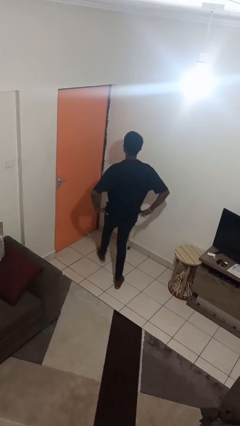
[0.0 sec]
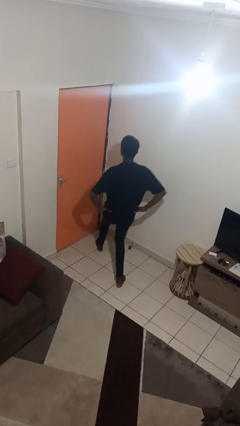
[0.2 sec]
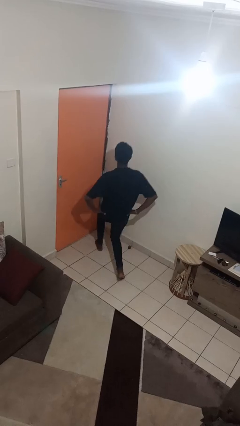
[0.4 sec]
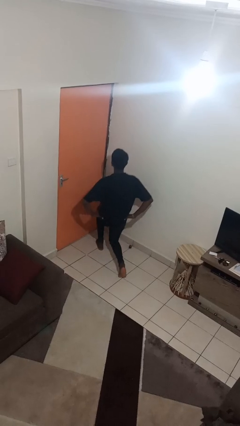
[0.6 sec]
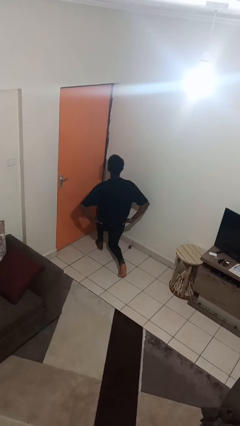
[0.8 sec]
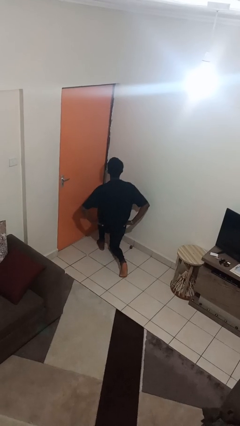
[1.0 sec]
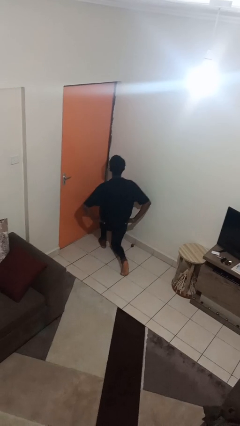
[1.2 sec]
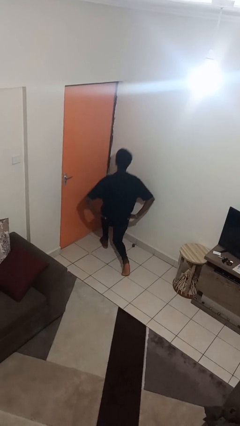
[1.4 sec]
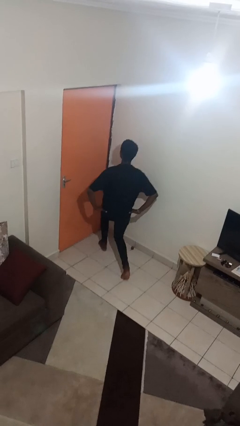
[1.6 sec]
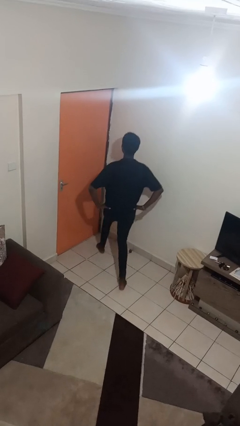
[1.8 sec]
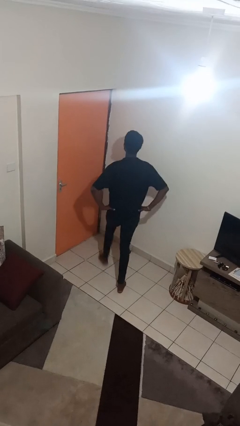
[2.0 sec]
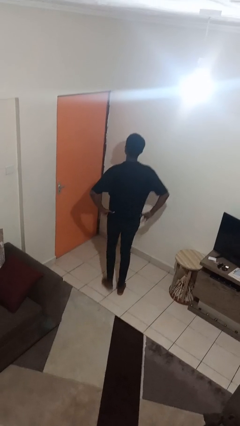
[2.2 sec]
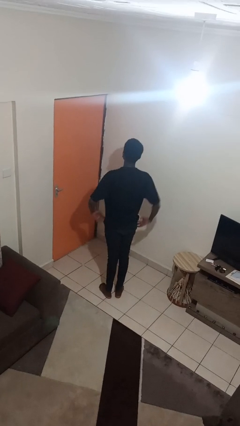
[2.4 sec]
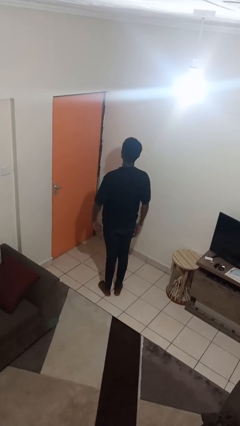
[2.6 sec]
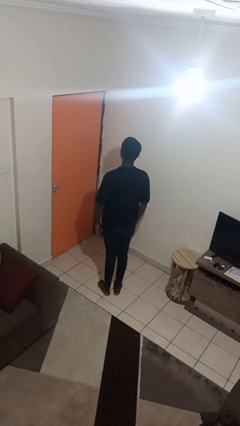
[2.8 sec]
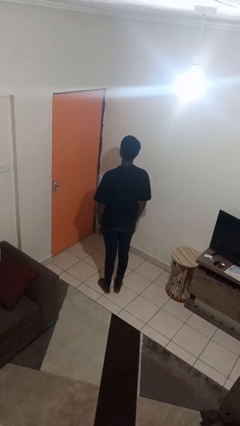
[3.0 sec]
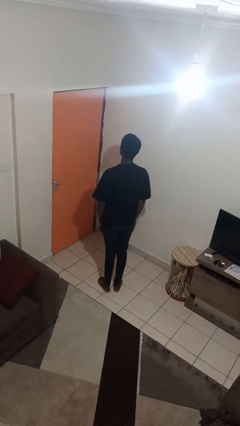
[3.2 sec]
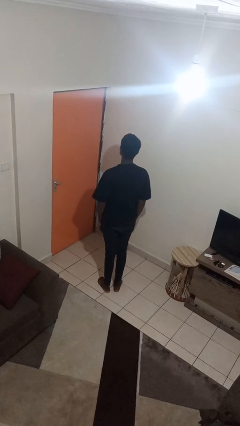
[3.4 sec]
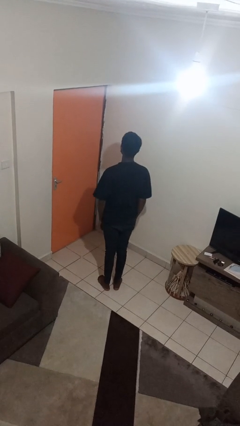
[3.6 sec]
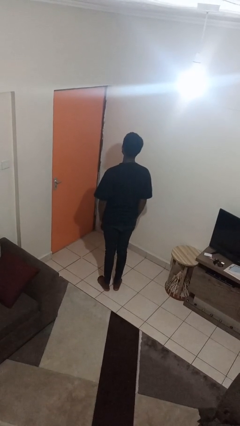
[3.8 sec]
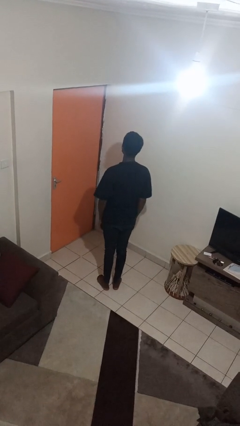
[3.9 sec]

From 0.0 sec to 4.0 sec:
person exercises with lunges

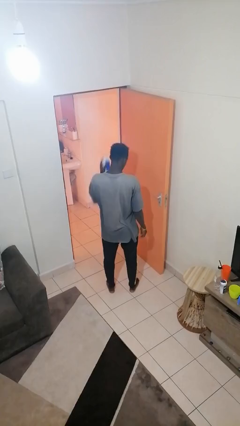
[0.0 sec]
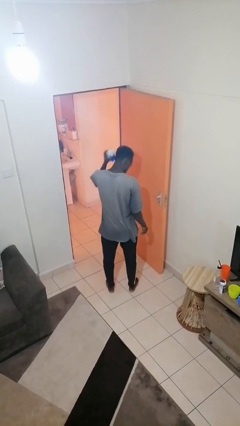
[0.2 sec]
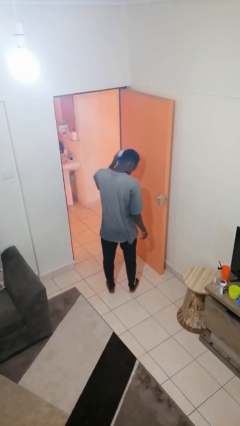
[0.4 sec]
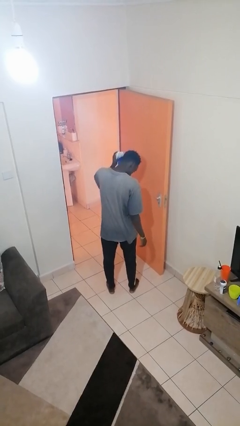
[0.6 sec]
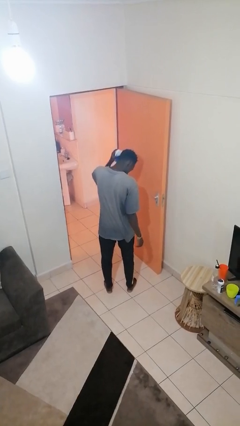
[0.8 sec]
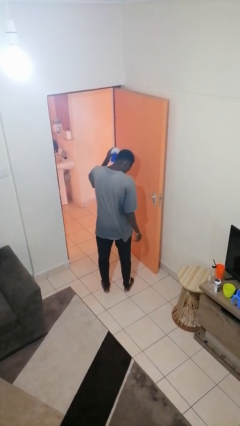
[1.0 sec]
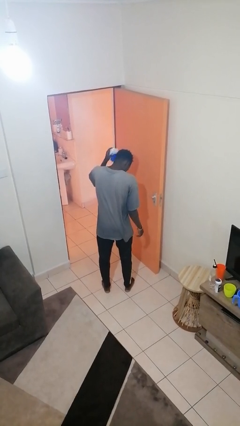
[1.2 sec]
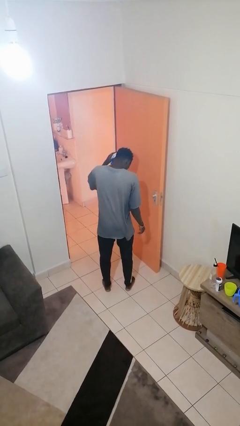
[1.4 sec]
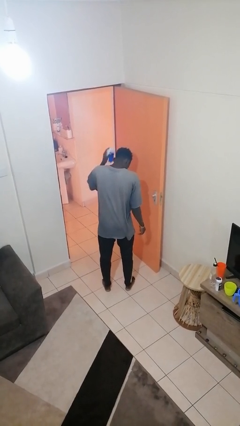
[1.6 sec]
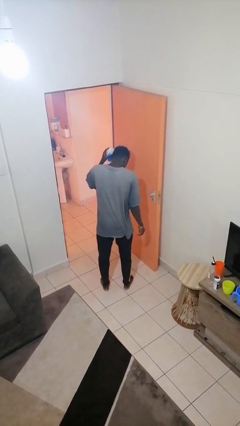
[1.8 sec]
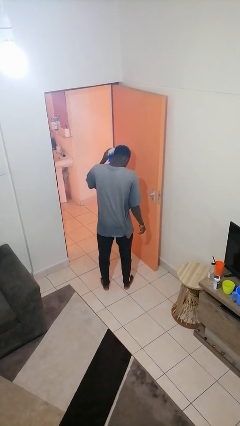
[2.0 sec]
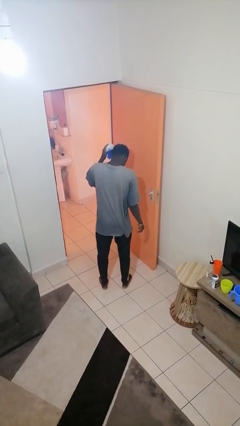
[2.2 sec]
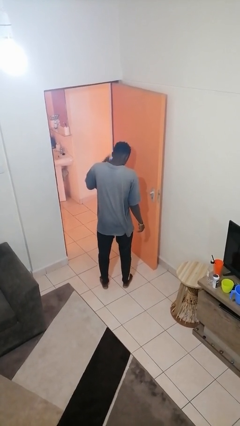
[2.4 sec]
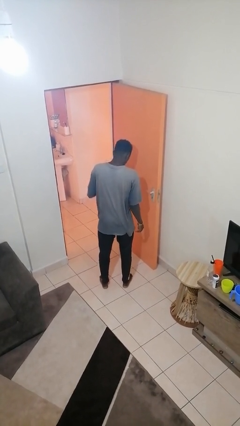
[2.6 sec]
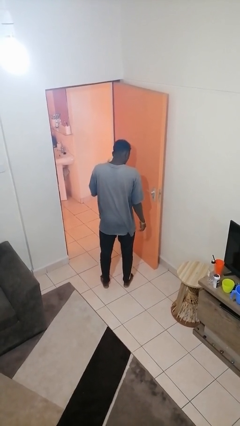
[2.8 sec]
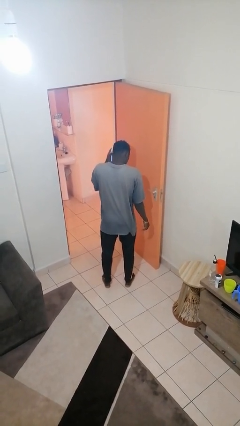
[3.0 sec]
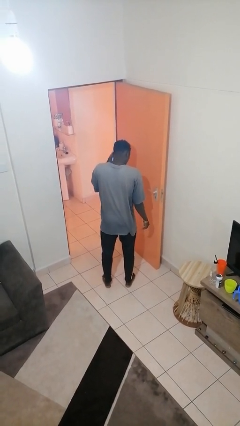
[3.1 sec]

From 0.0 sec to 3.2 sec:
person brushes hair

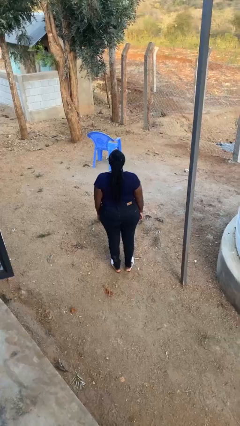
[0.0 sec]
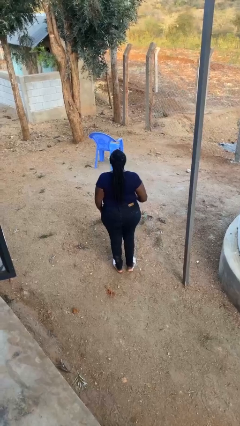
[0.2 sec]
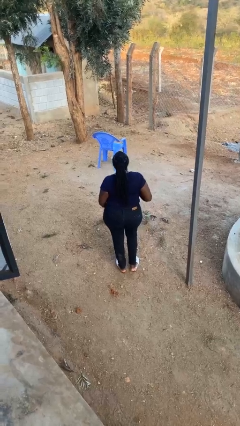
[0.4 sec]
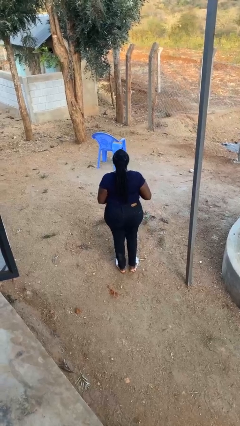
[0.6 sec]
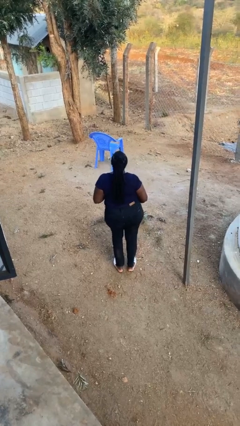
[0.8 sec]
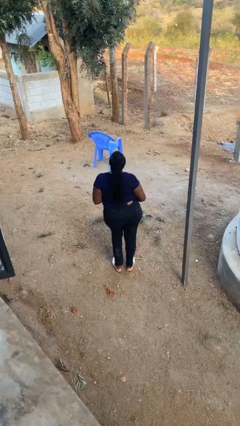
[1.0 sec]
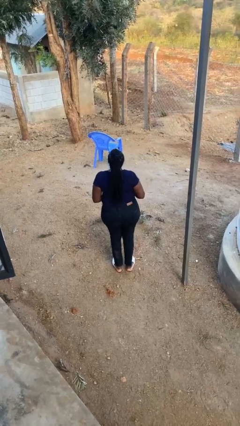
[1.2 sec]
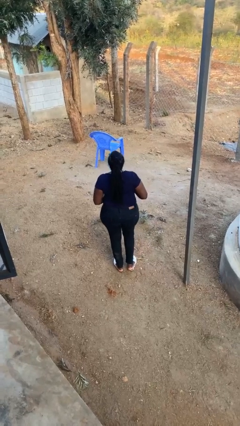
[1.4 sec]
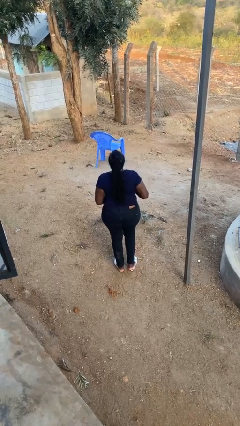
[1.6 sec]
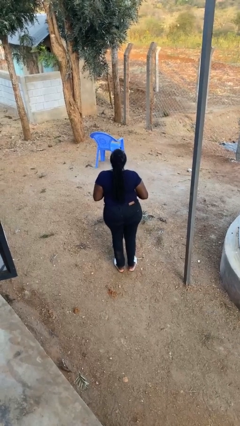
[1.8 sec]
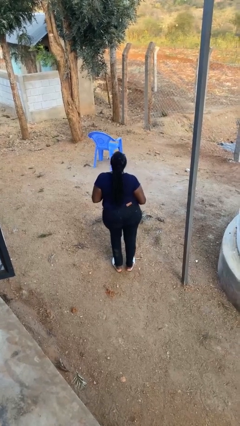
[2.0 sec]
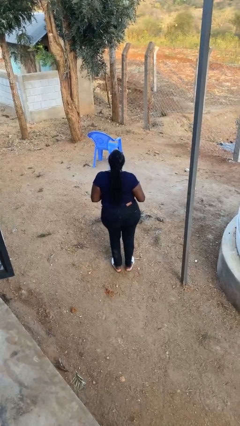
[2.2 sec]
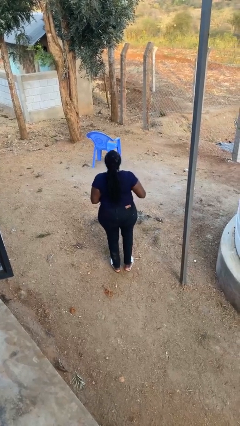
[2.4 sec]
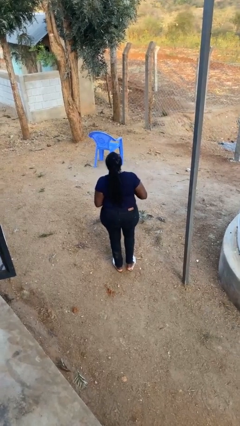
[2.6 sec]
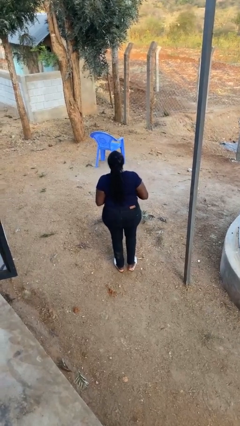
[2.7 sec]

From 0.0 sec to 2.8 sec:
person wiggles hips

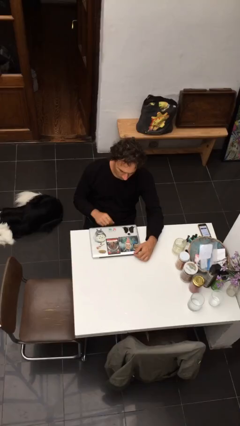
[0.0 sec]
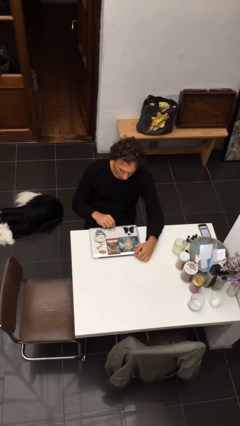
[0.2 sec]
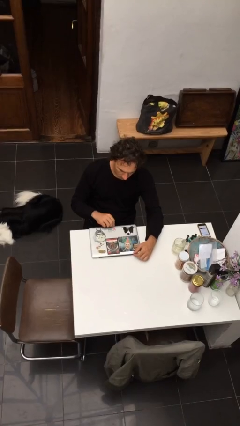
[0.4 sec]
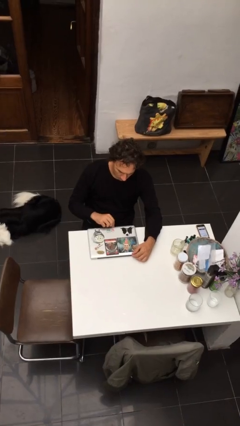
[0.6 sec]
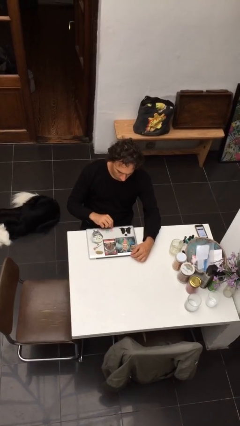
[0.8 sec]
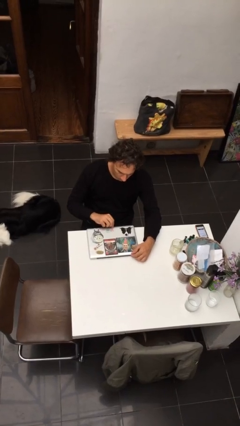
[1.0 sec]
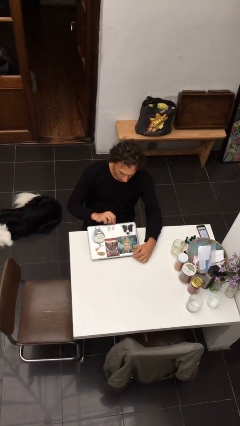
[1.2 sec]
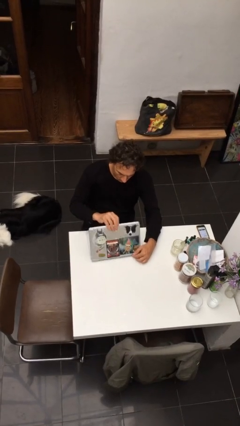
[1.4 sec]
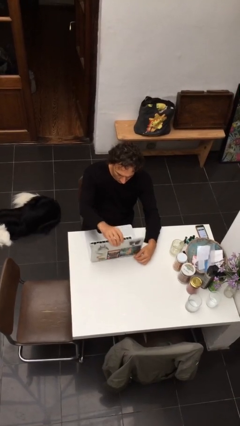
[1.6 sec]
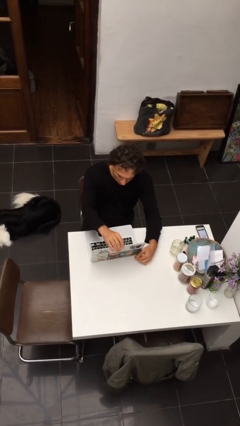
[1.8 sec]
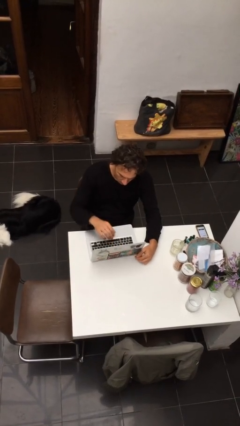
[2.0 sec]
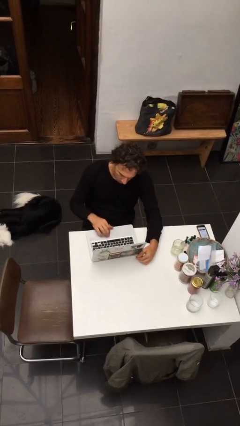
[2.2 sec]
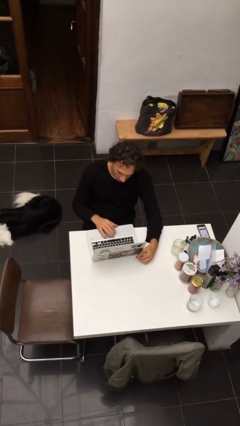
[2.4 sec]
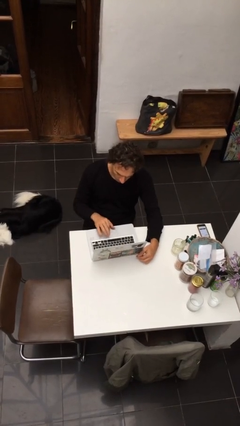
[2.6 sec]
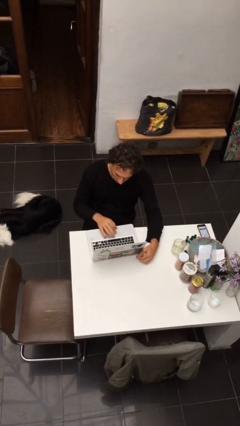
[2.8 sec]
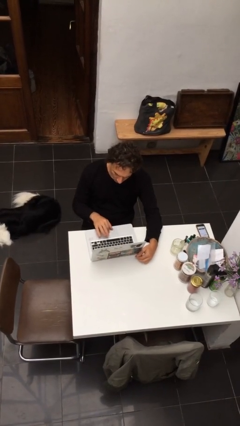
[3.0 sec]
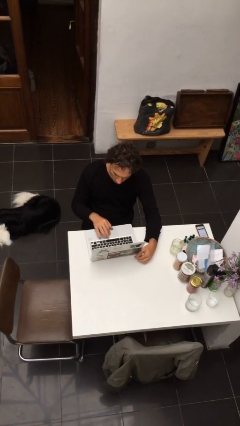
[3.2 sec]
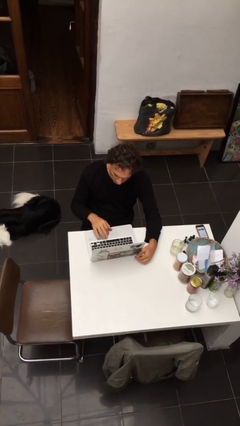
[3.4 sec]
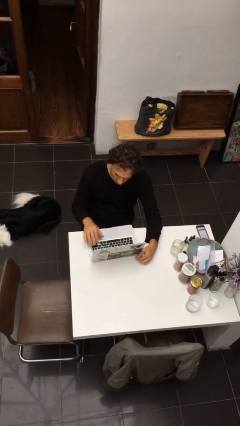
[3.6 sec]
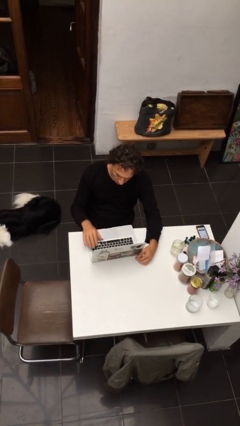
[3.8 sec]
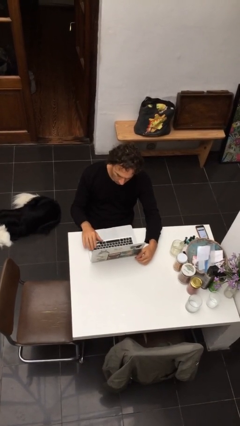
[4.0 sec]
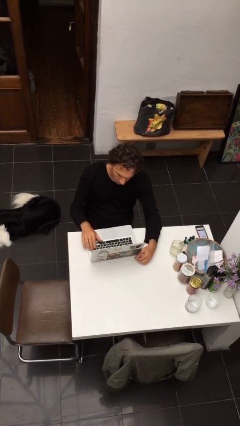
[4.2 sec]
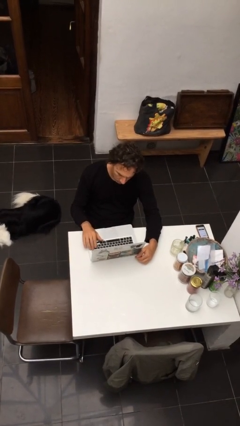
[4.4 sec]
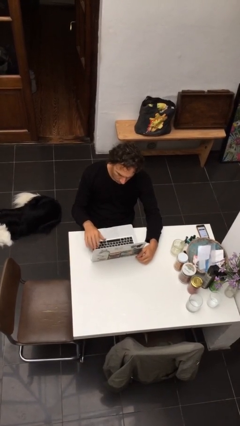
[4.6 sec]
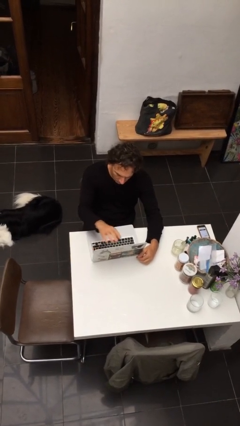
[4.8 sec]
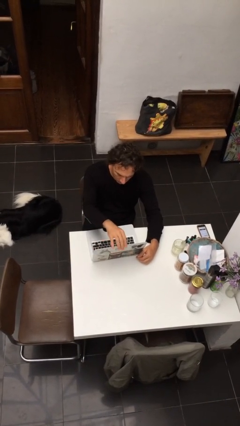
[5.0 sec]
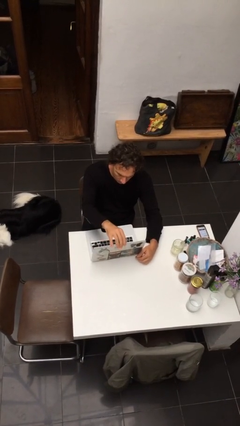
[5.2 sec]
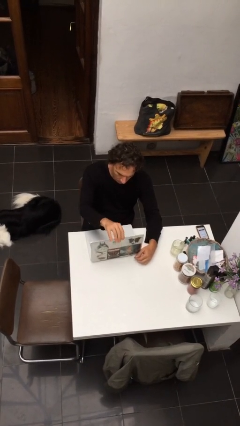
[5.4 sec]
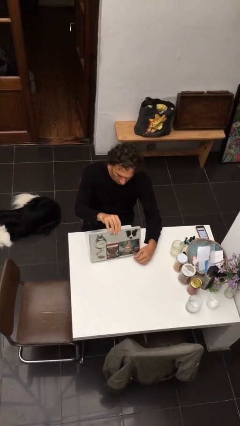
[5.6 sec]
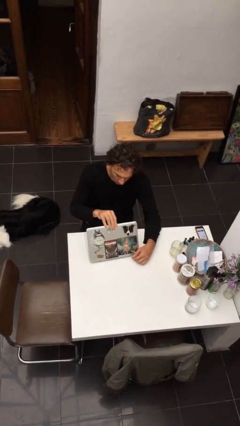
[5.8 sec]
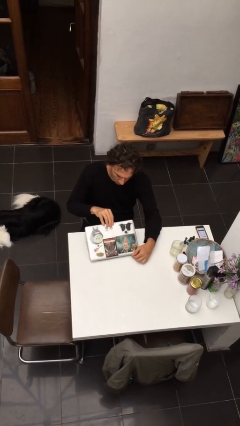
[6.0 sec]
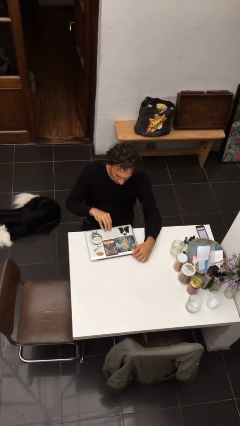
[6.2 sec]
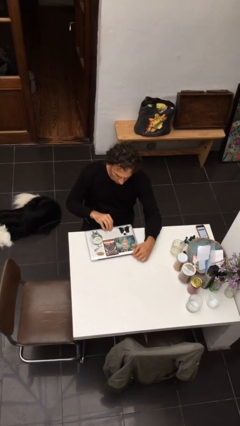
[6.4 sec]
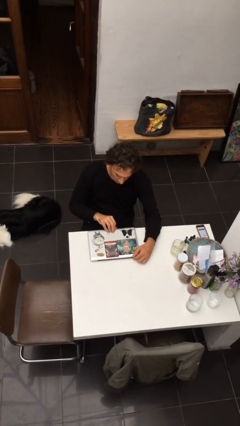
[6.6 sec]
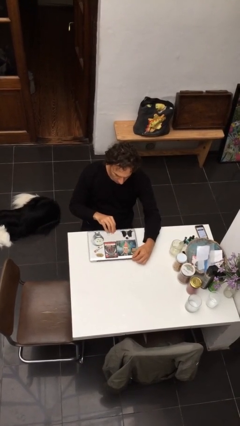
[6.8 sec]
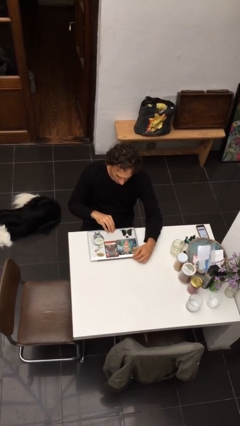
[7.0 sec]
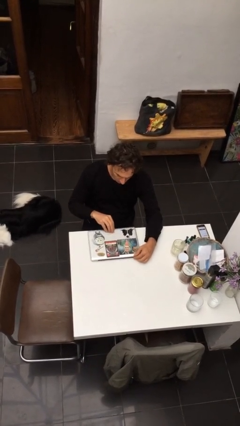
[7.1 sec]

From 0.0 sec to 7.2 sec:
person interacts with laptop

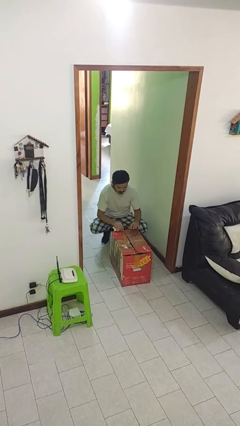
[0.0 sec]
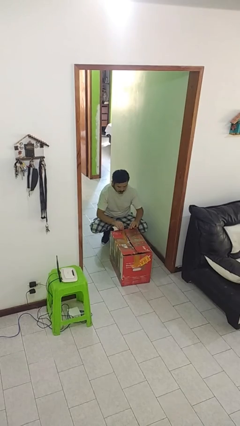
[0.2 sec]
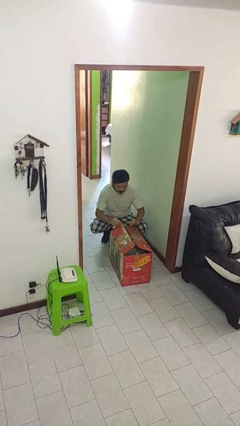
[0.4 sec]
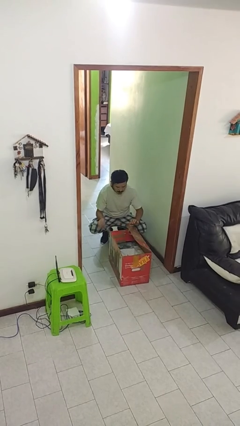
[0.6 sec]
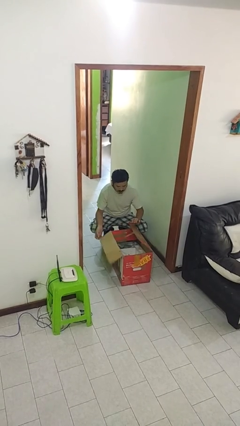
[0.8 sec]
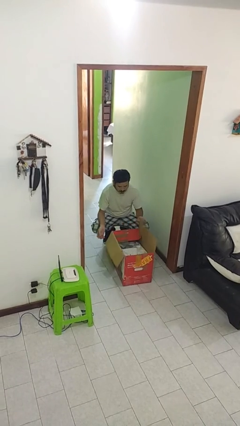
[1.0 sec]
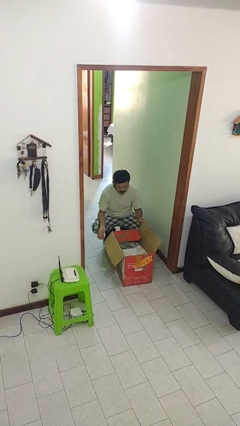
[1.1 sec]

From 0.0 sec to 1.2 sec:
person opens box
